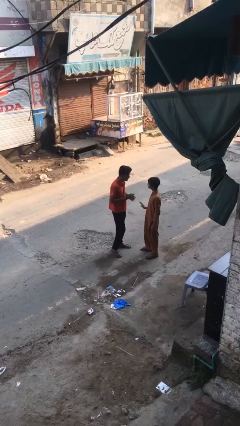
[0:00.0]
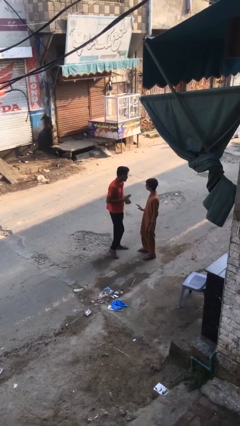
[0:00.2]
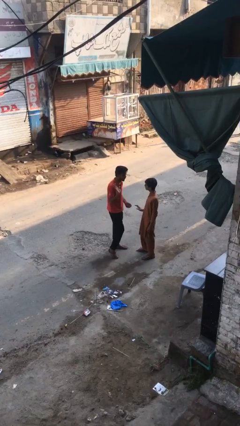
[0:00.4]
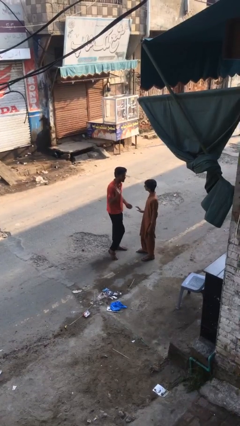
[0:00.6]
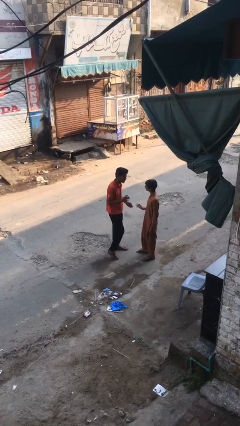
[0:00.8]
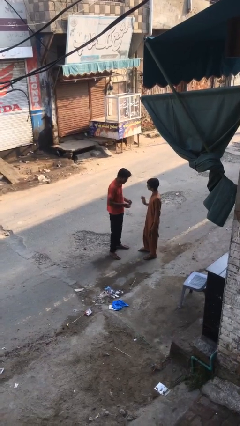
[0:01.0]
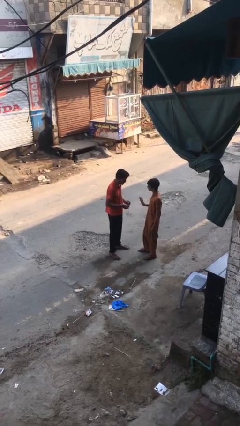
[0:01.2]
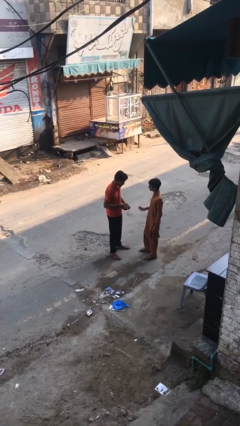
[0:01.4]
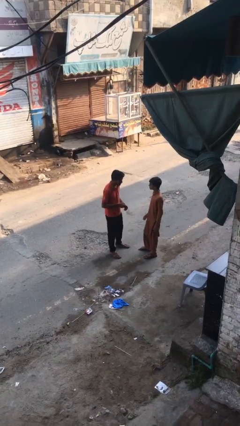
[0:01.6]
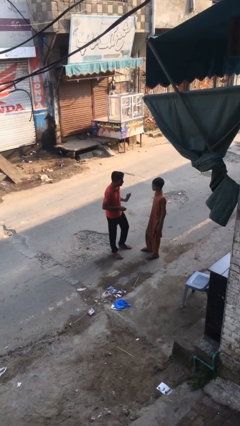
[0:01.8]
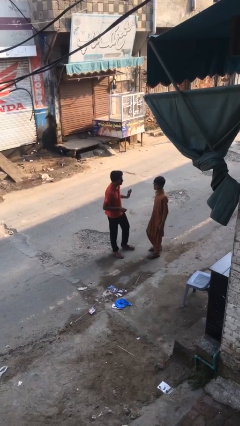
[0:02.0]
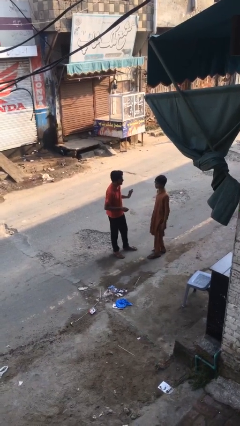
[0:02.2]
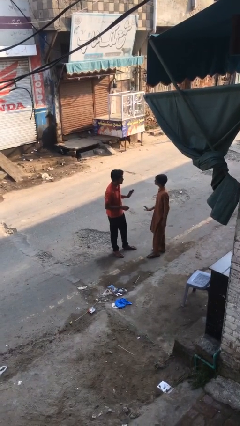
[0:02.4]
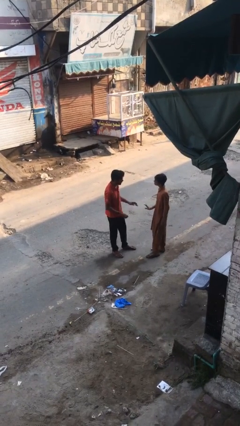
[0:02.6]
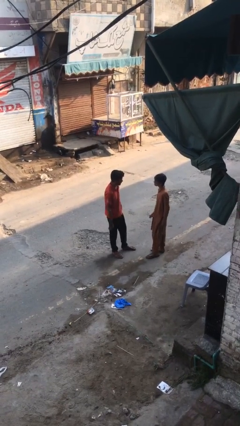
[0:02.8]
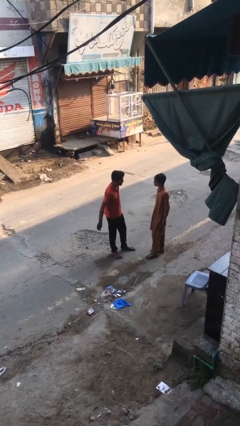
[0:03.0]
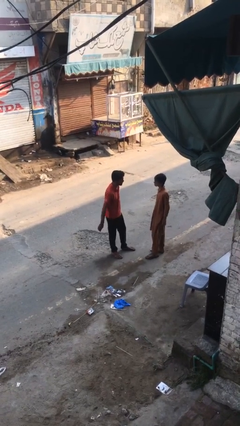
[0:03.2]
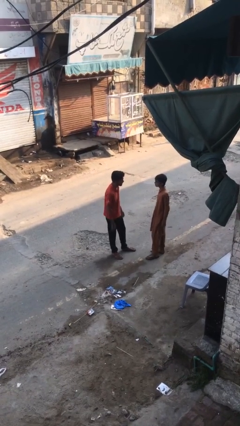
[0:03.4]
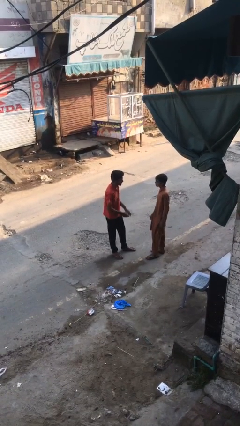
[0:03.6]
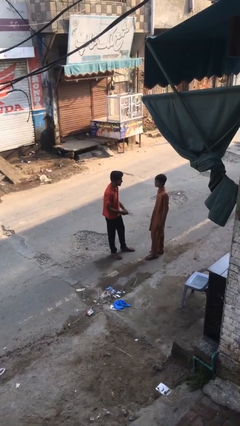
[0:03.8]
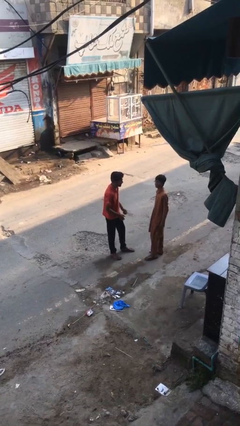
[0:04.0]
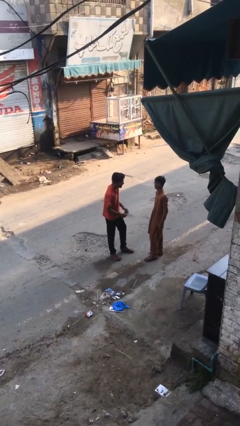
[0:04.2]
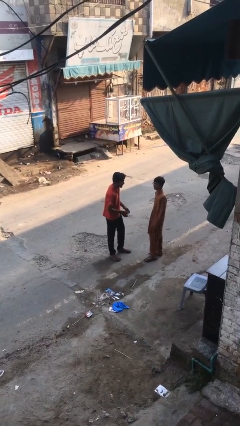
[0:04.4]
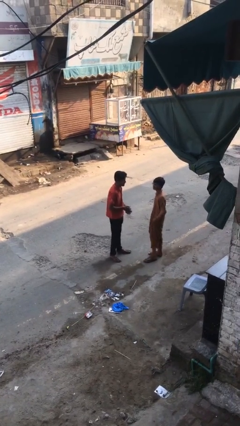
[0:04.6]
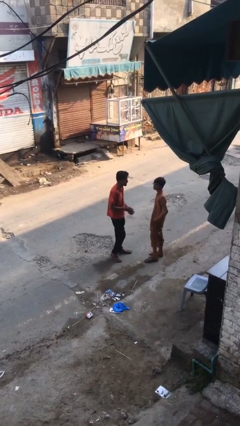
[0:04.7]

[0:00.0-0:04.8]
person talks to person

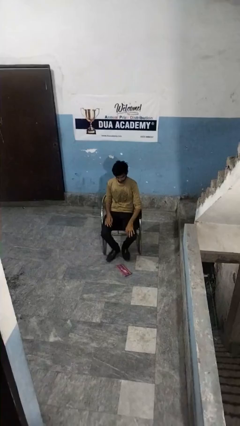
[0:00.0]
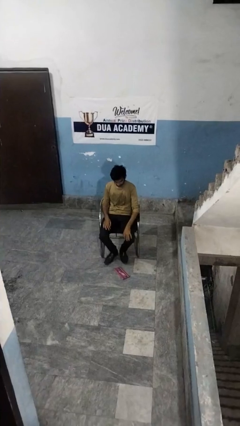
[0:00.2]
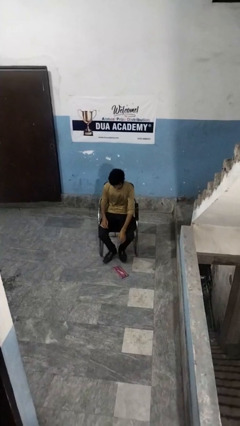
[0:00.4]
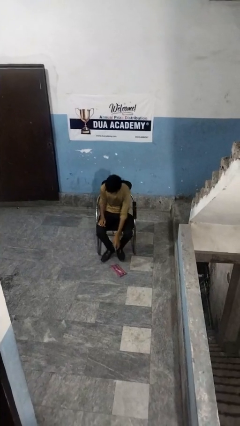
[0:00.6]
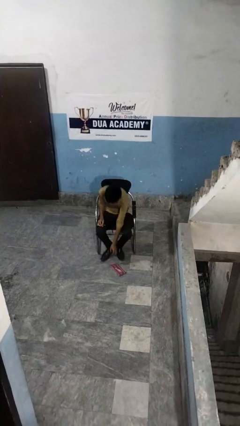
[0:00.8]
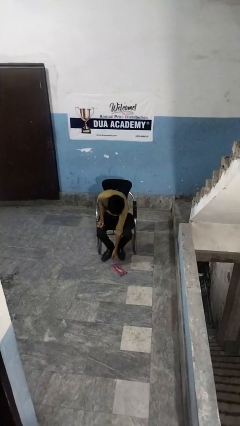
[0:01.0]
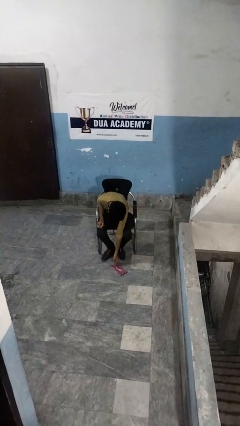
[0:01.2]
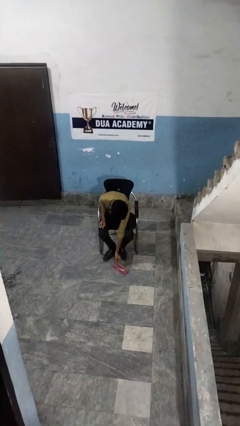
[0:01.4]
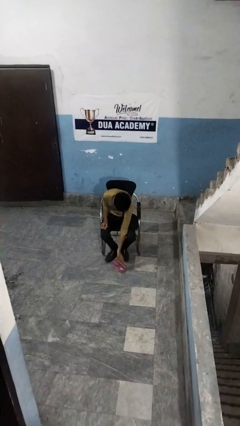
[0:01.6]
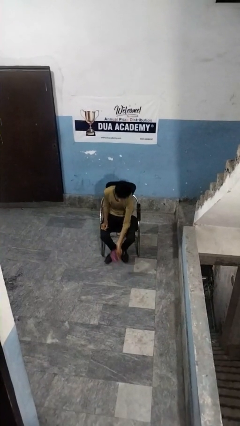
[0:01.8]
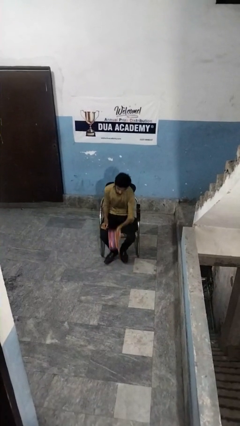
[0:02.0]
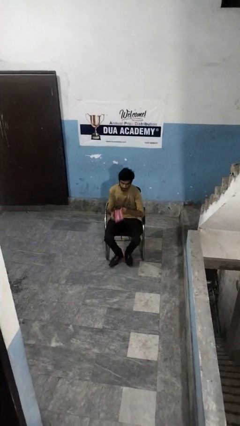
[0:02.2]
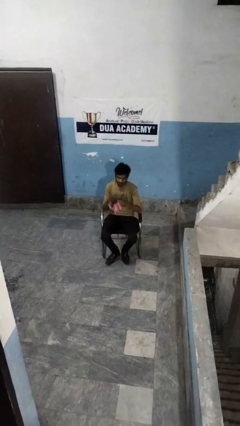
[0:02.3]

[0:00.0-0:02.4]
person picks up object from floor

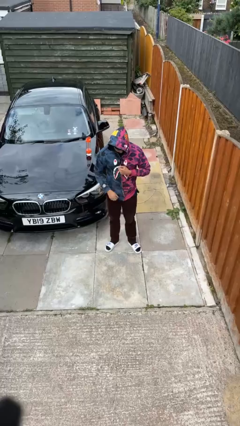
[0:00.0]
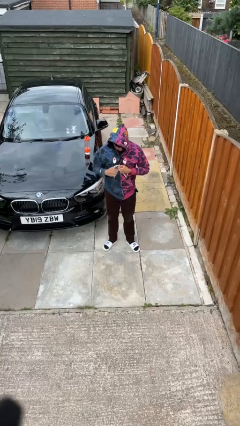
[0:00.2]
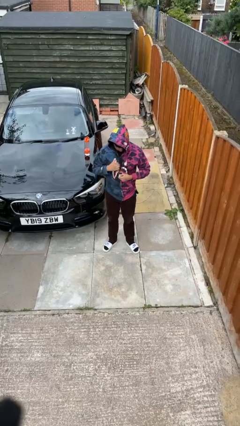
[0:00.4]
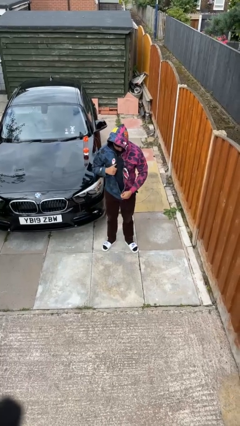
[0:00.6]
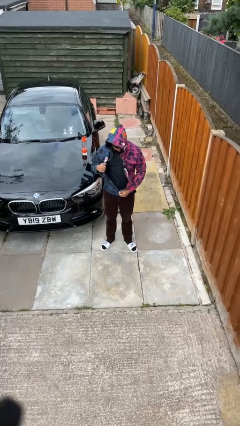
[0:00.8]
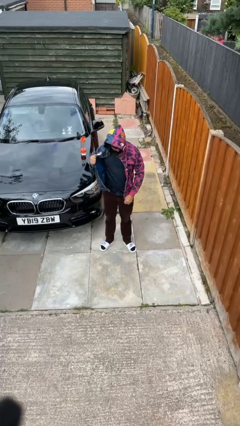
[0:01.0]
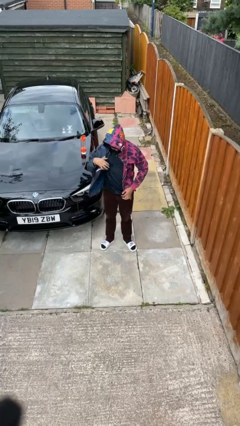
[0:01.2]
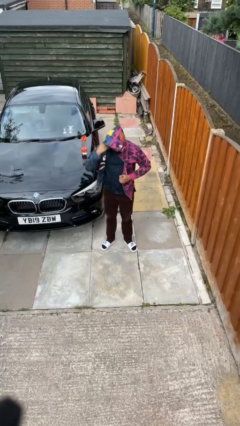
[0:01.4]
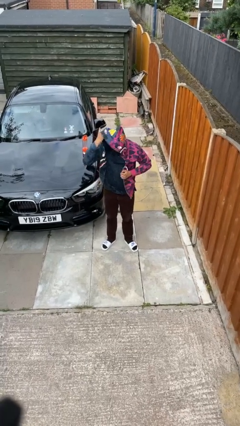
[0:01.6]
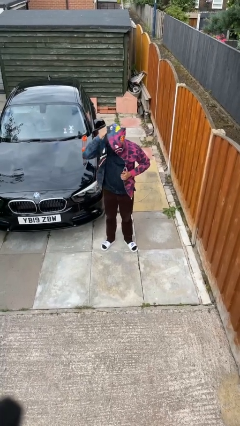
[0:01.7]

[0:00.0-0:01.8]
person unzips jacket

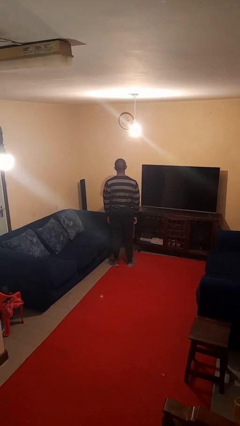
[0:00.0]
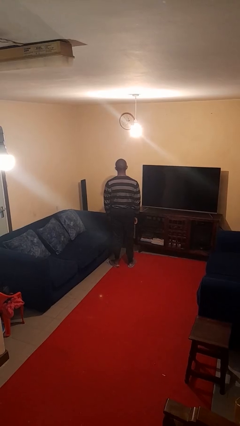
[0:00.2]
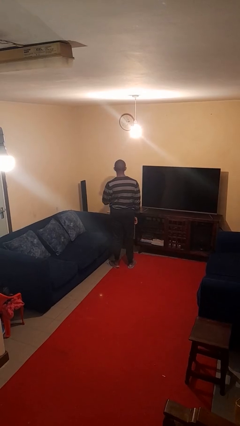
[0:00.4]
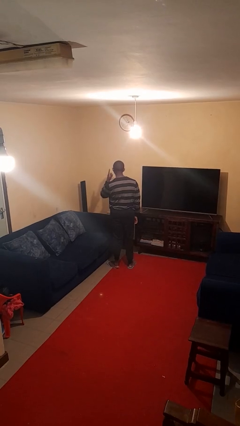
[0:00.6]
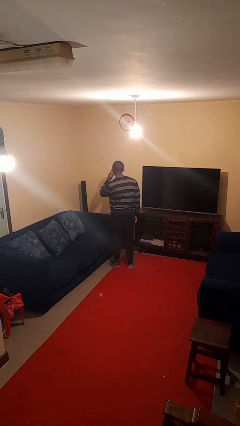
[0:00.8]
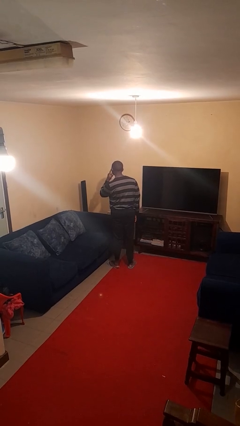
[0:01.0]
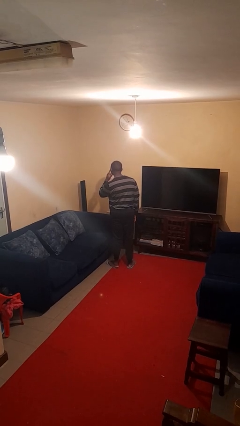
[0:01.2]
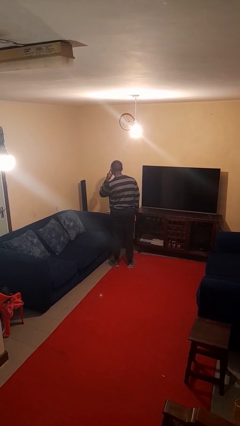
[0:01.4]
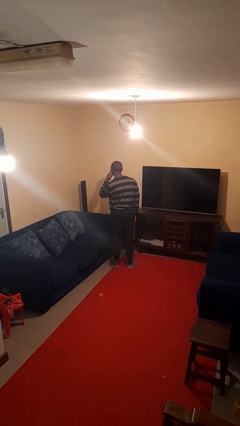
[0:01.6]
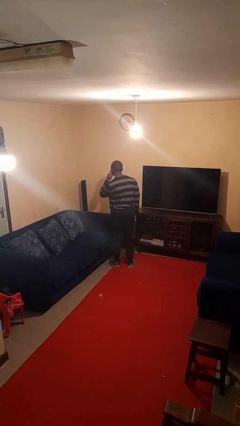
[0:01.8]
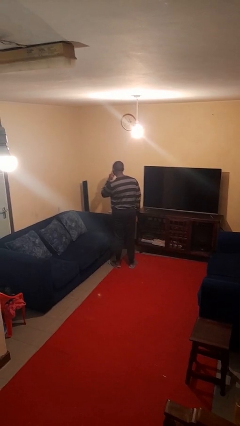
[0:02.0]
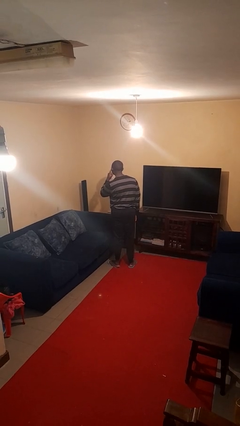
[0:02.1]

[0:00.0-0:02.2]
person gestures listen closely

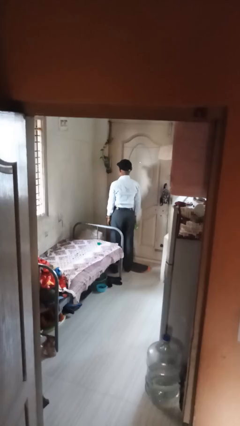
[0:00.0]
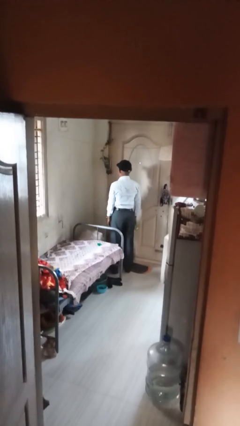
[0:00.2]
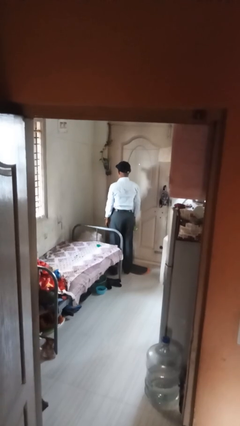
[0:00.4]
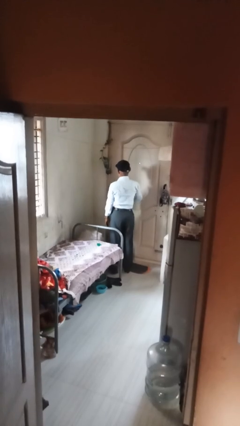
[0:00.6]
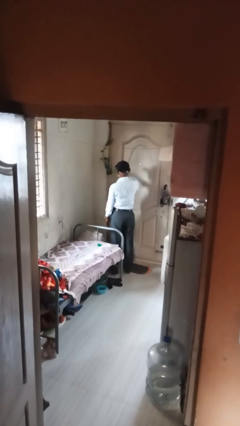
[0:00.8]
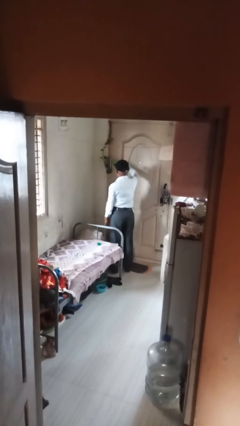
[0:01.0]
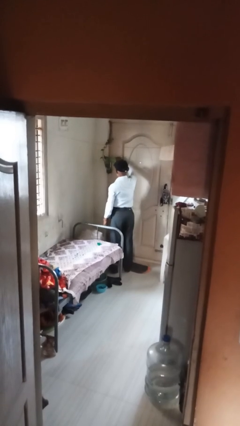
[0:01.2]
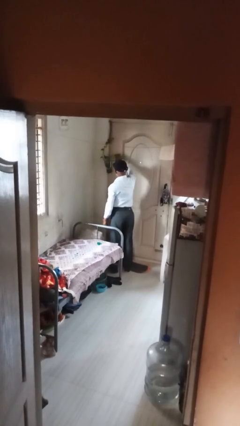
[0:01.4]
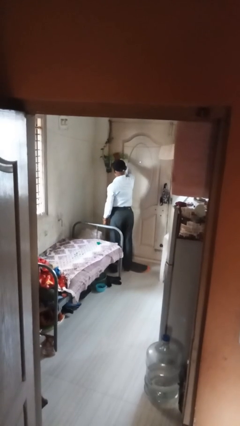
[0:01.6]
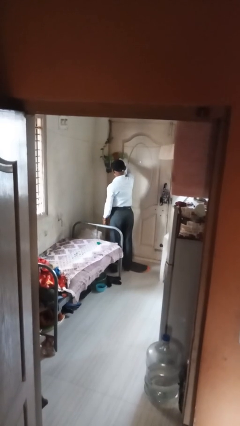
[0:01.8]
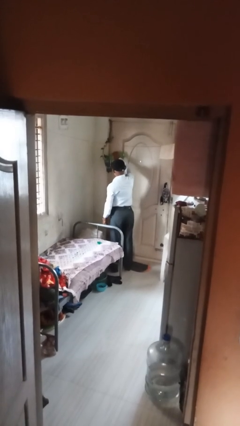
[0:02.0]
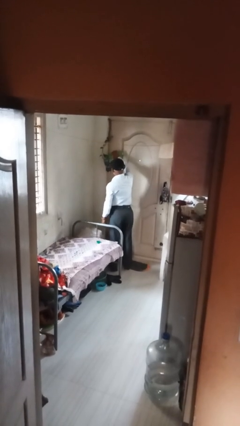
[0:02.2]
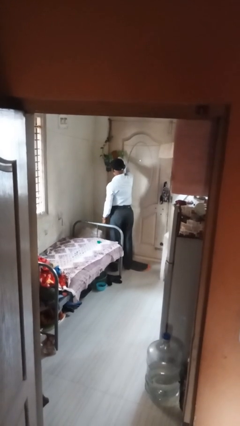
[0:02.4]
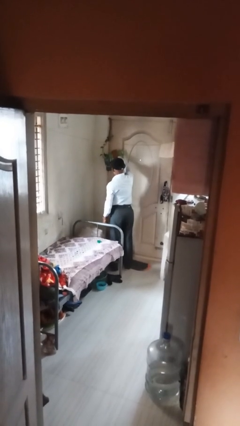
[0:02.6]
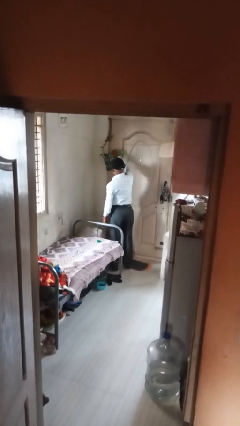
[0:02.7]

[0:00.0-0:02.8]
person waters houseplant

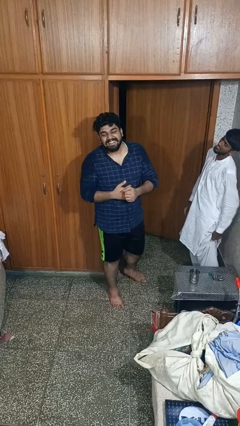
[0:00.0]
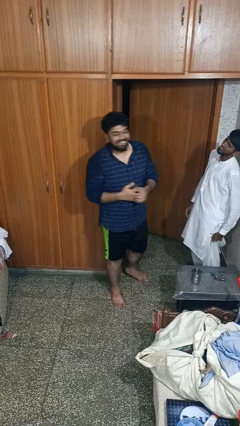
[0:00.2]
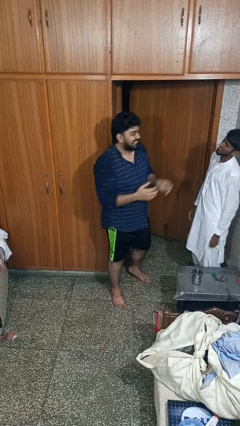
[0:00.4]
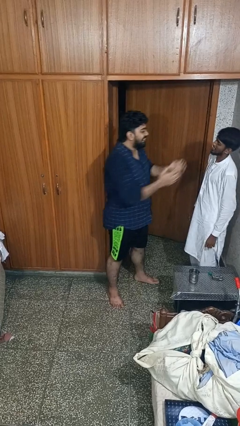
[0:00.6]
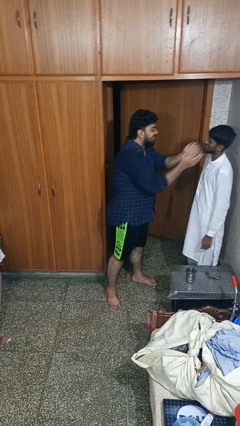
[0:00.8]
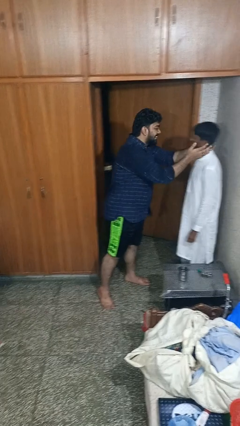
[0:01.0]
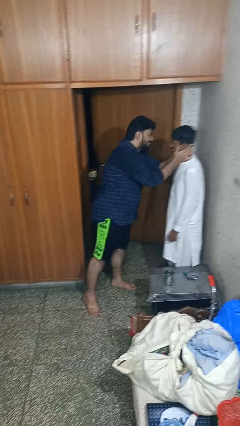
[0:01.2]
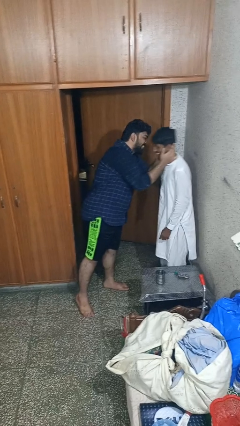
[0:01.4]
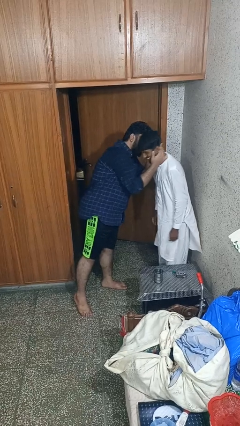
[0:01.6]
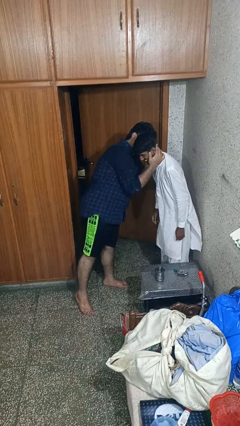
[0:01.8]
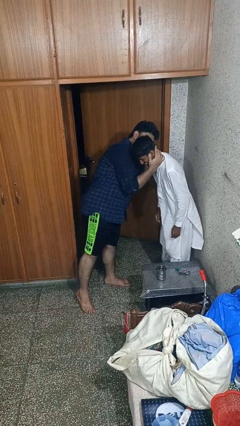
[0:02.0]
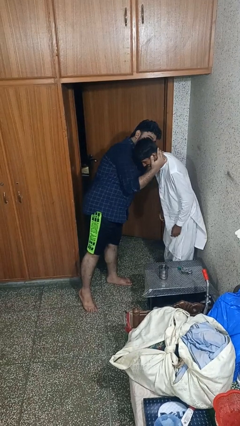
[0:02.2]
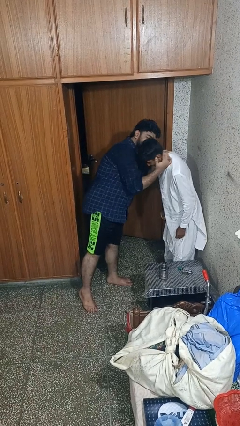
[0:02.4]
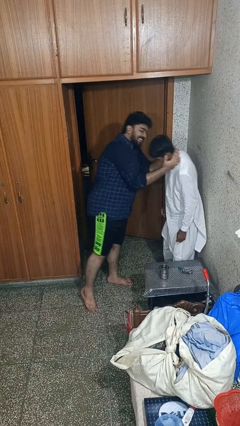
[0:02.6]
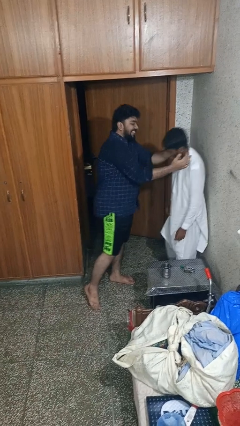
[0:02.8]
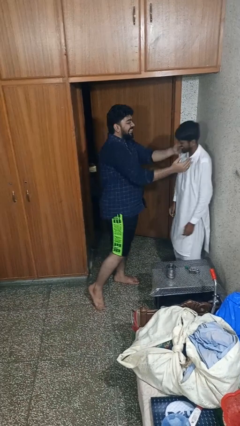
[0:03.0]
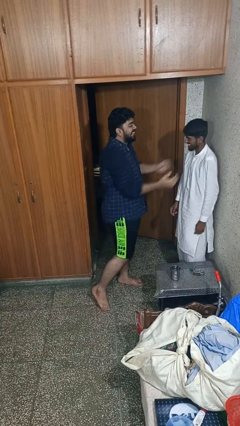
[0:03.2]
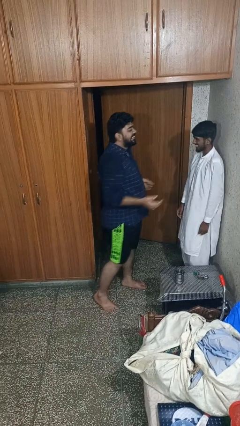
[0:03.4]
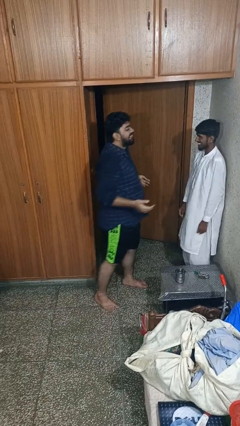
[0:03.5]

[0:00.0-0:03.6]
person kisses cheek of person
